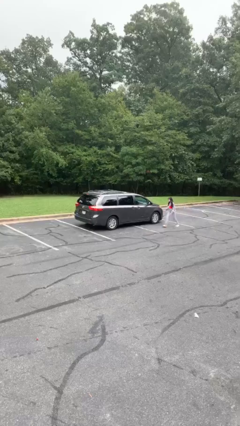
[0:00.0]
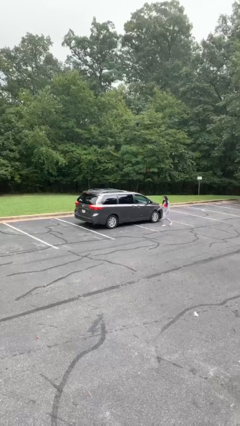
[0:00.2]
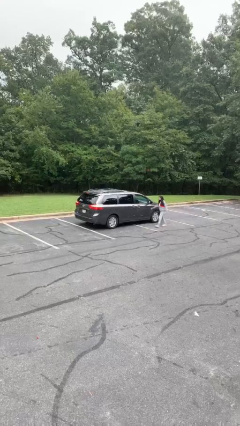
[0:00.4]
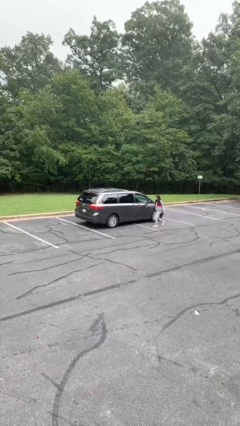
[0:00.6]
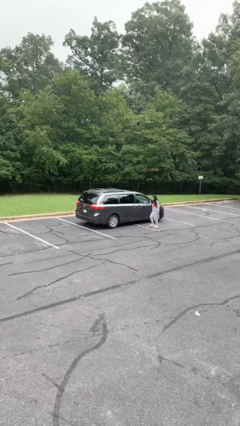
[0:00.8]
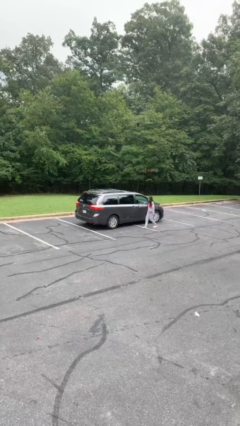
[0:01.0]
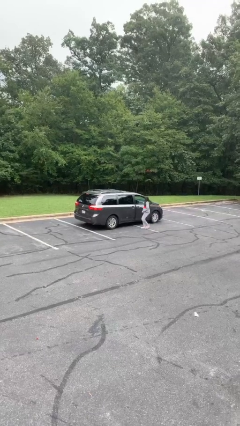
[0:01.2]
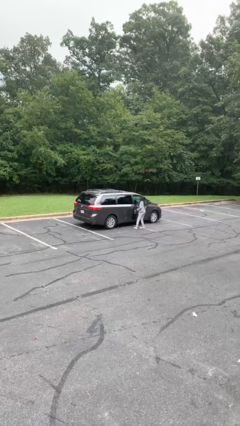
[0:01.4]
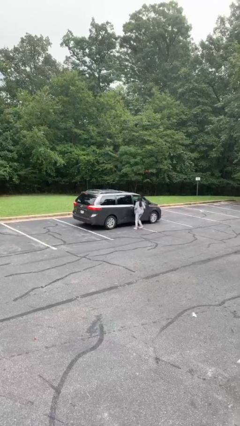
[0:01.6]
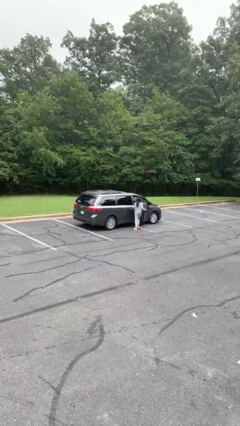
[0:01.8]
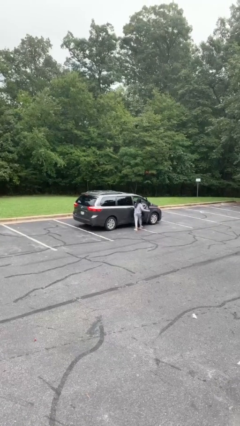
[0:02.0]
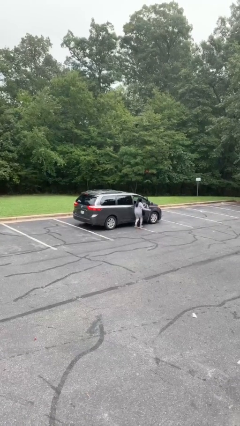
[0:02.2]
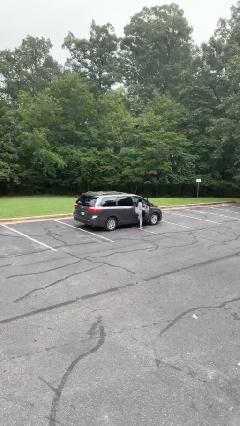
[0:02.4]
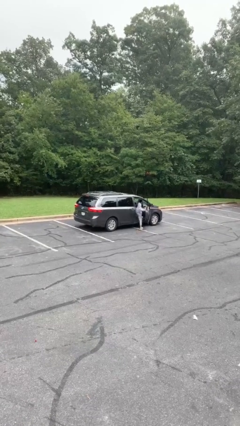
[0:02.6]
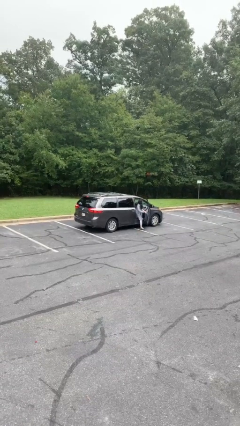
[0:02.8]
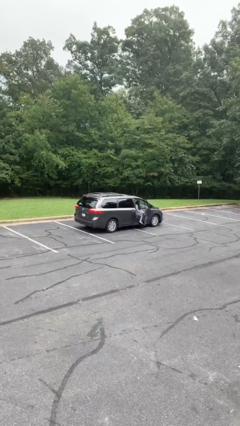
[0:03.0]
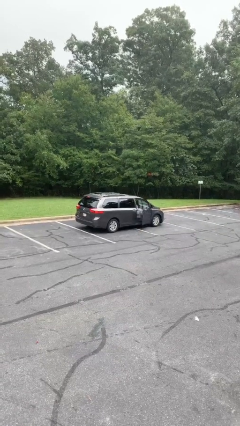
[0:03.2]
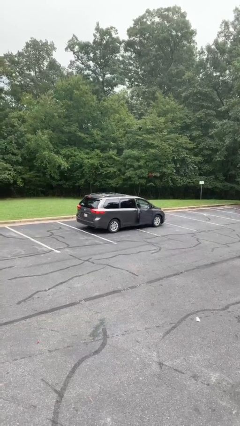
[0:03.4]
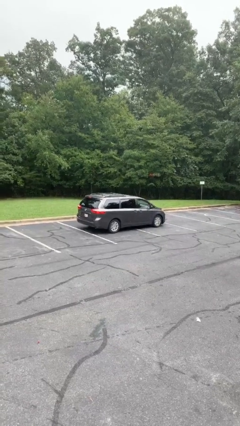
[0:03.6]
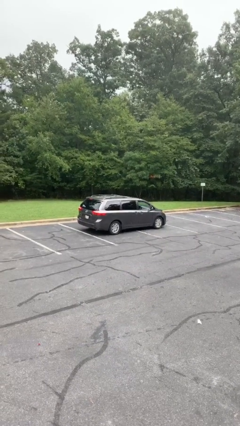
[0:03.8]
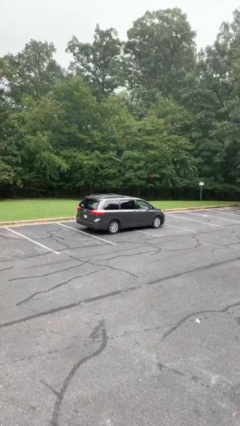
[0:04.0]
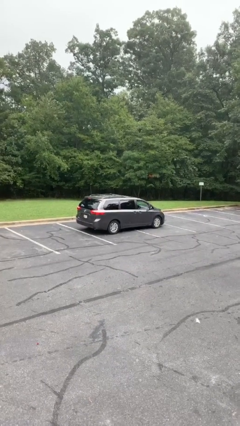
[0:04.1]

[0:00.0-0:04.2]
car picks up person

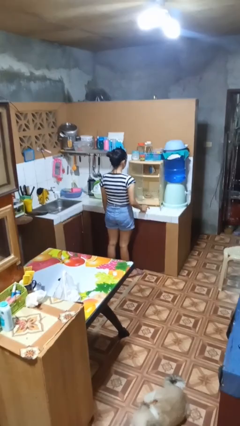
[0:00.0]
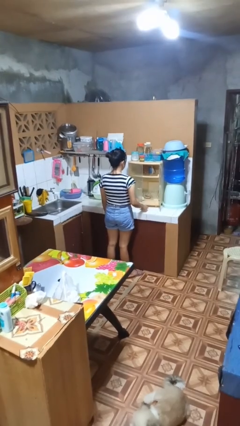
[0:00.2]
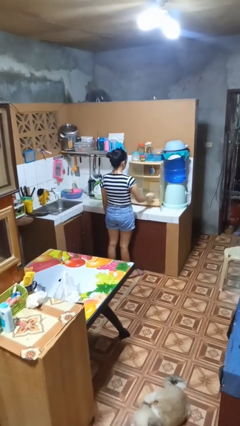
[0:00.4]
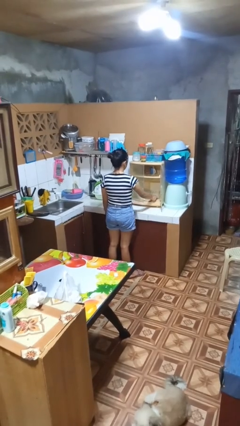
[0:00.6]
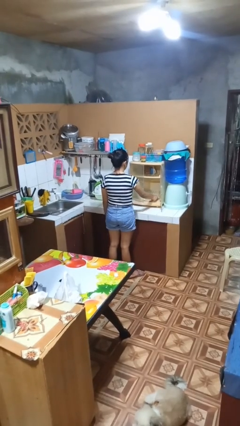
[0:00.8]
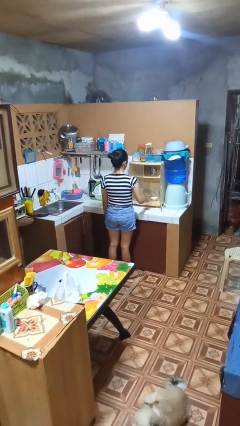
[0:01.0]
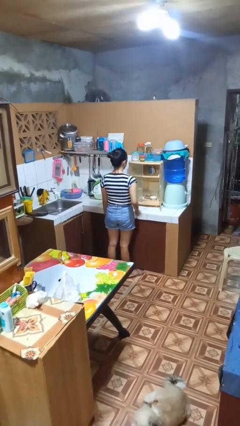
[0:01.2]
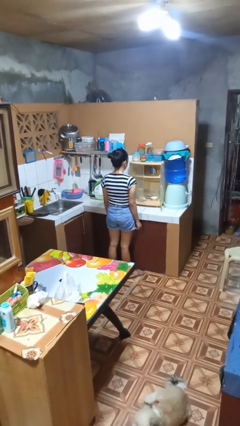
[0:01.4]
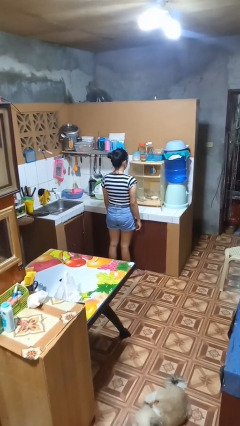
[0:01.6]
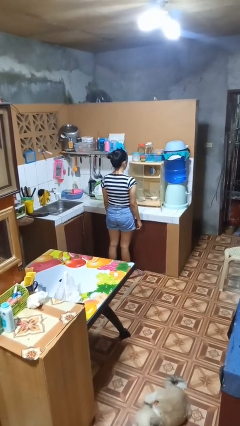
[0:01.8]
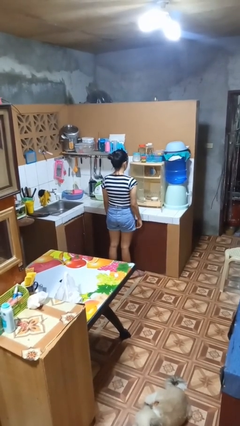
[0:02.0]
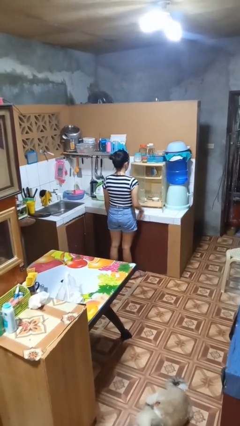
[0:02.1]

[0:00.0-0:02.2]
person puts object in cabinet

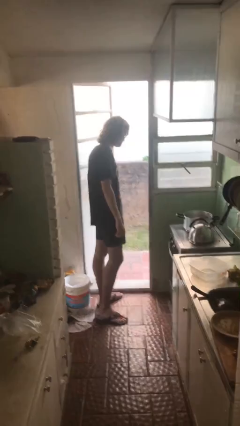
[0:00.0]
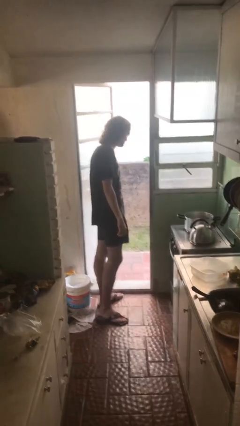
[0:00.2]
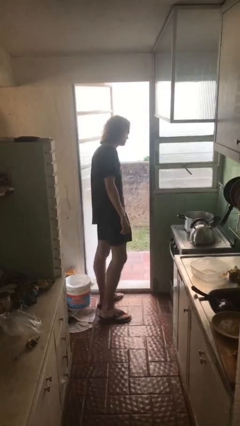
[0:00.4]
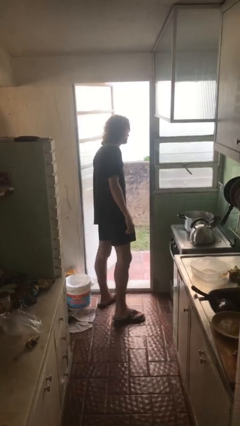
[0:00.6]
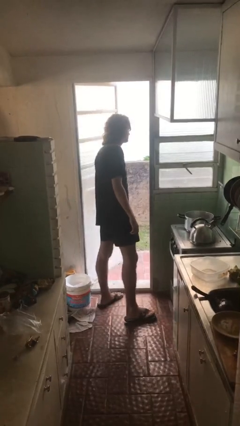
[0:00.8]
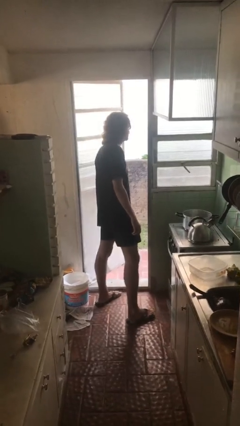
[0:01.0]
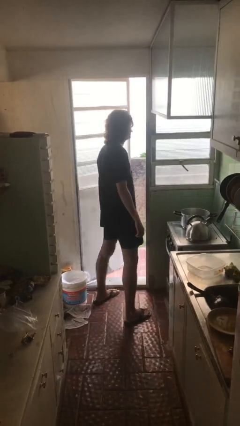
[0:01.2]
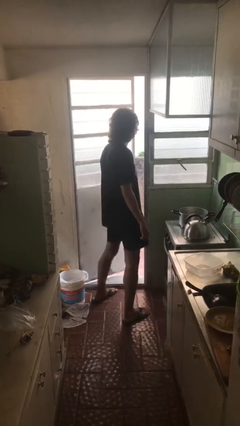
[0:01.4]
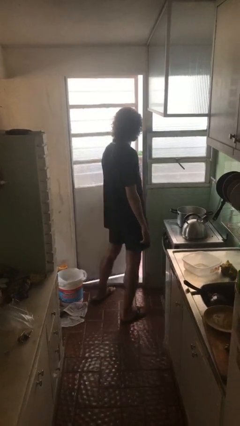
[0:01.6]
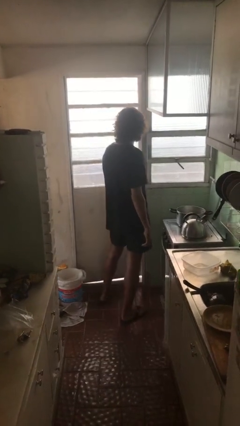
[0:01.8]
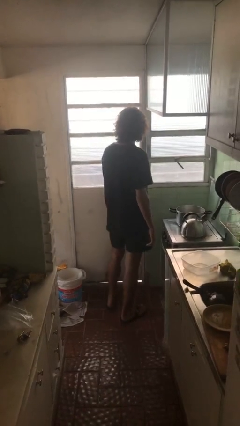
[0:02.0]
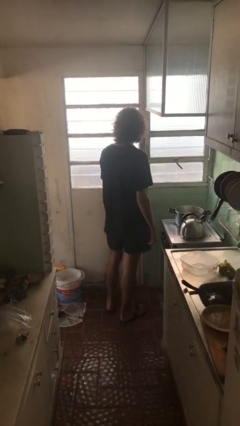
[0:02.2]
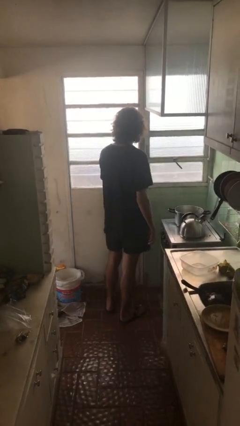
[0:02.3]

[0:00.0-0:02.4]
person closes facility door

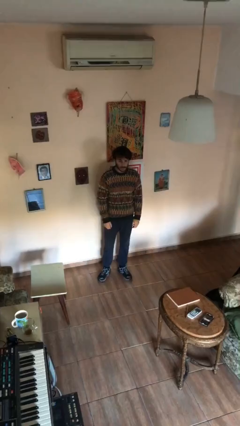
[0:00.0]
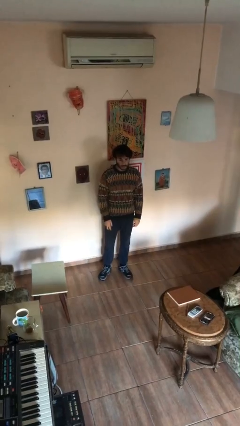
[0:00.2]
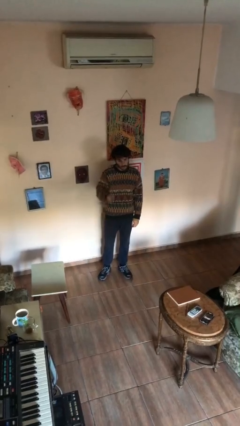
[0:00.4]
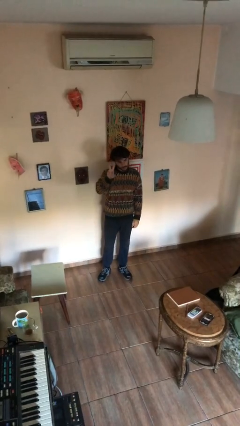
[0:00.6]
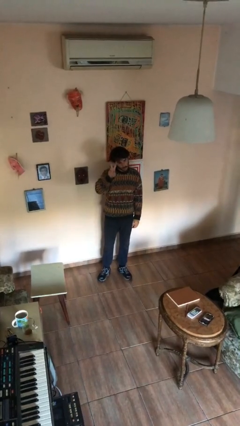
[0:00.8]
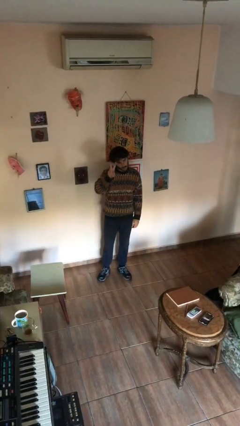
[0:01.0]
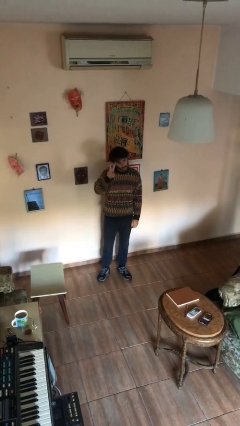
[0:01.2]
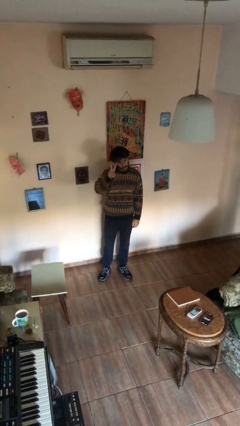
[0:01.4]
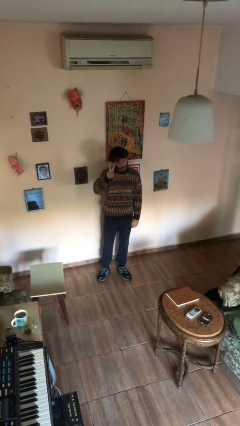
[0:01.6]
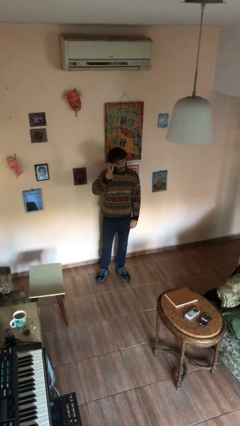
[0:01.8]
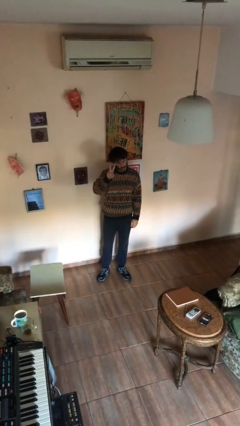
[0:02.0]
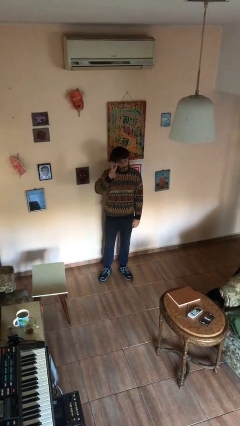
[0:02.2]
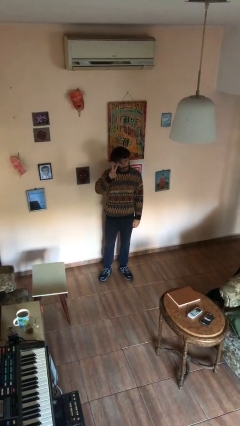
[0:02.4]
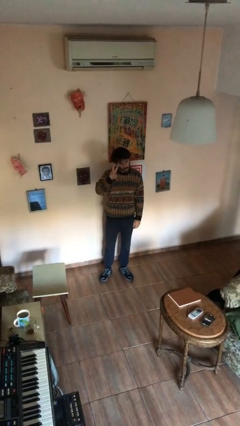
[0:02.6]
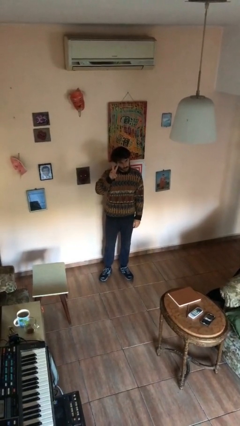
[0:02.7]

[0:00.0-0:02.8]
person gestures peace

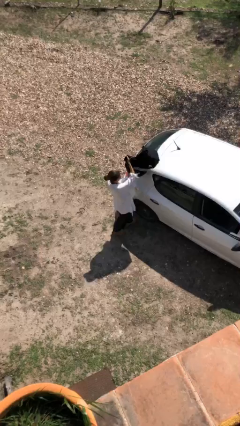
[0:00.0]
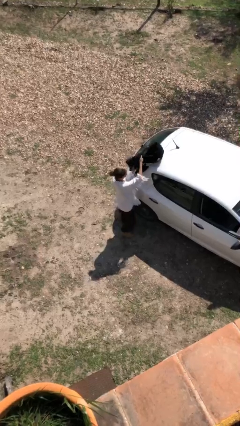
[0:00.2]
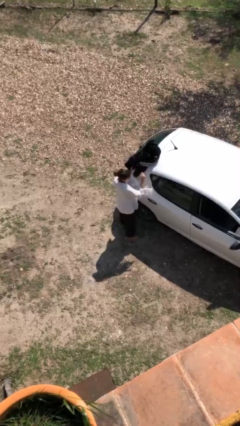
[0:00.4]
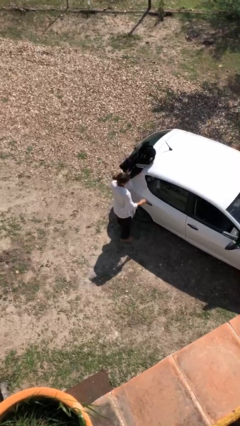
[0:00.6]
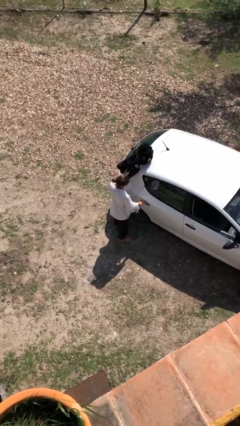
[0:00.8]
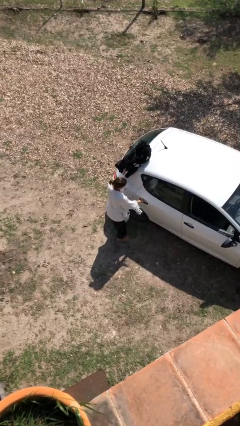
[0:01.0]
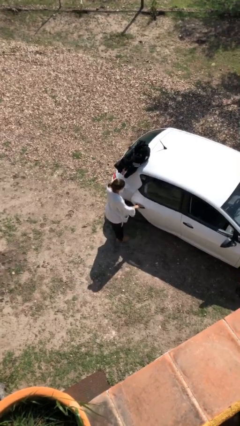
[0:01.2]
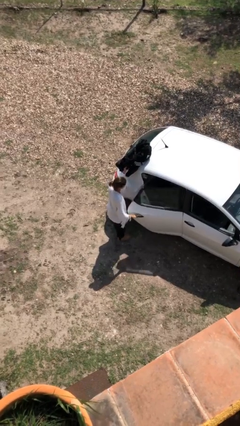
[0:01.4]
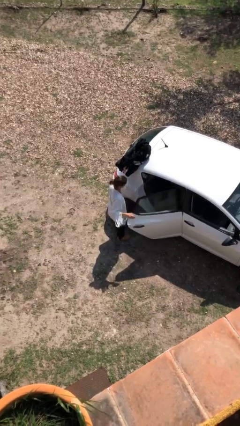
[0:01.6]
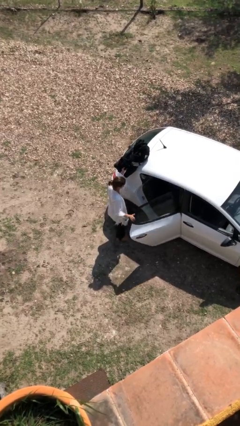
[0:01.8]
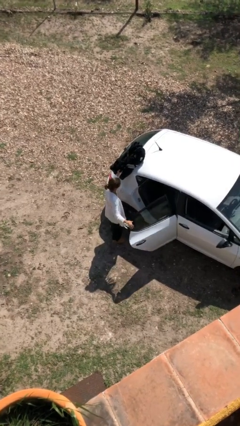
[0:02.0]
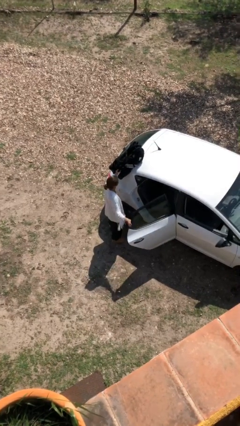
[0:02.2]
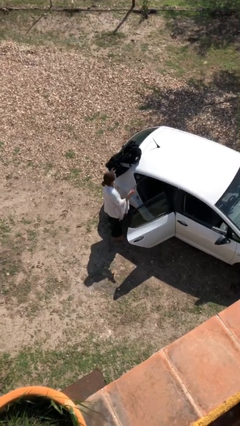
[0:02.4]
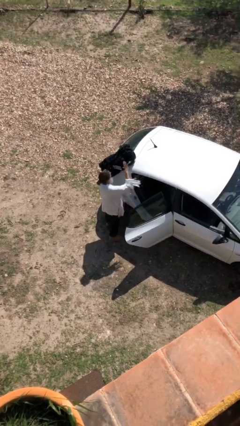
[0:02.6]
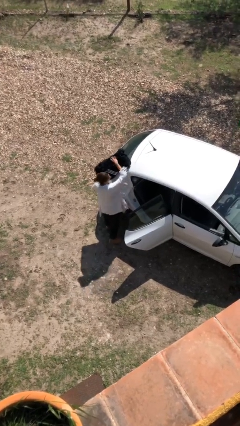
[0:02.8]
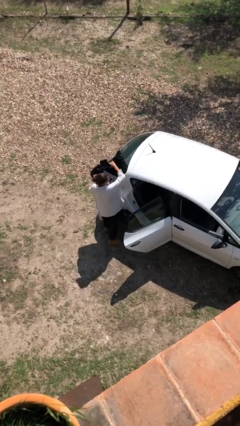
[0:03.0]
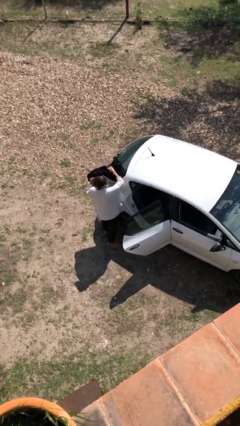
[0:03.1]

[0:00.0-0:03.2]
person opens car door

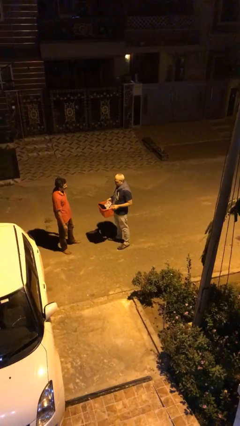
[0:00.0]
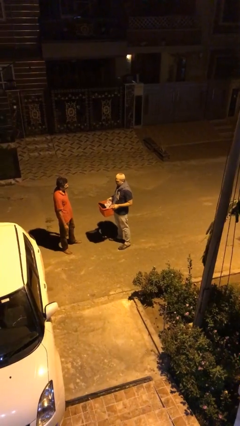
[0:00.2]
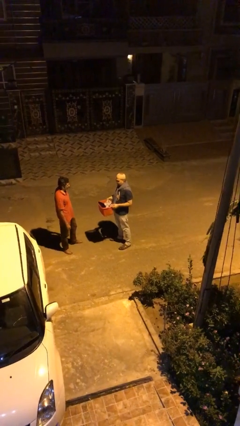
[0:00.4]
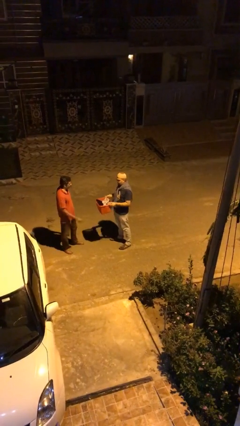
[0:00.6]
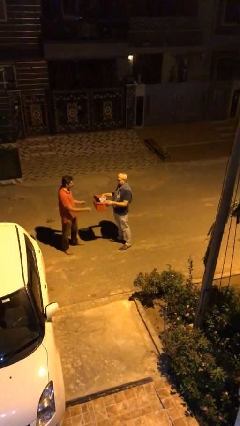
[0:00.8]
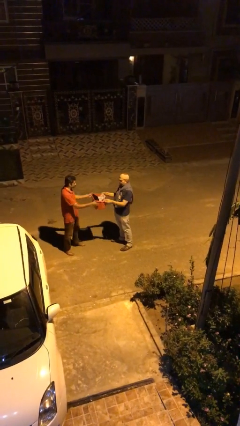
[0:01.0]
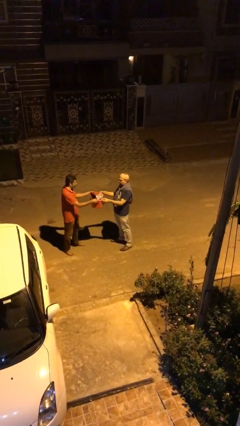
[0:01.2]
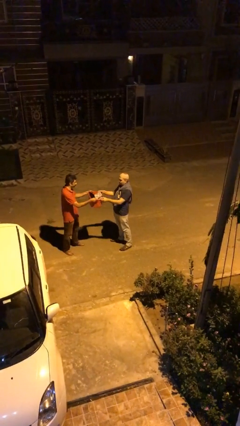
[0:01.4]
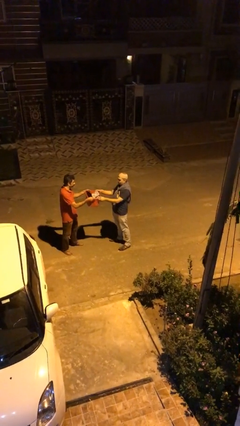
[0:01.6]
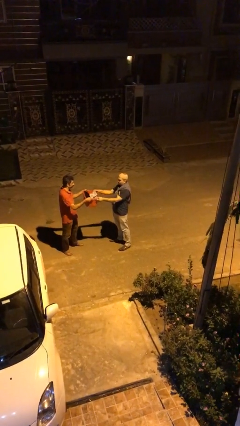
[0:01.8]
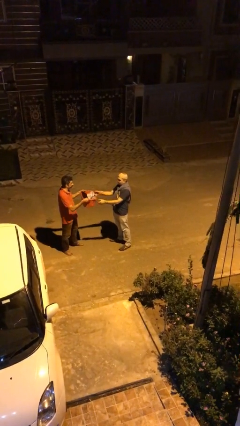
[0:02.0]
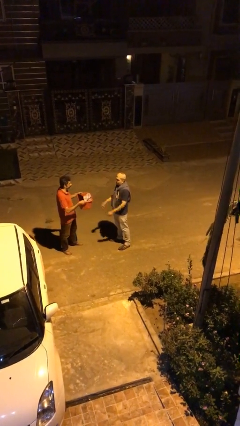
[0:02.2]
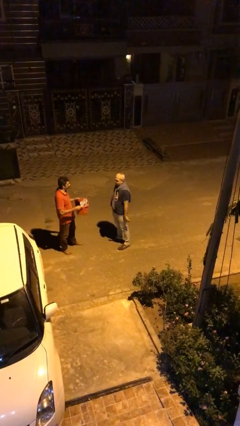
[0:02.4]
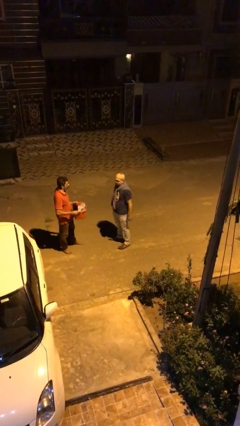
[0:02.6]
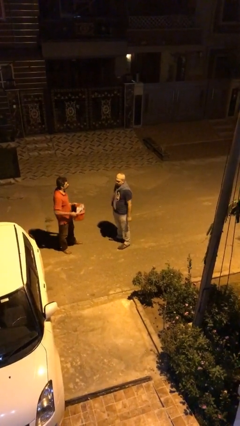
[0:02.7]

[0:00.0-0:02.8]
person transfers object to person
